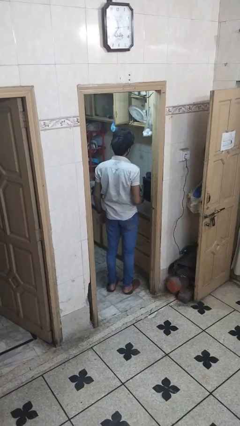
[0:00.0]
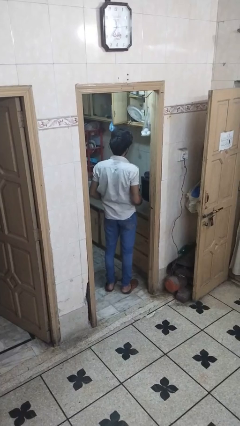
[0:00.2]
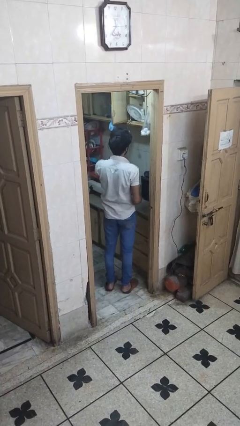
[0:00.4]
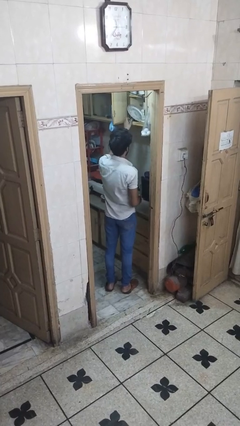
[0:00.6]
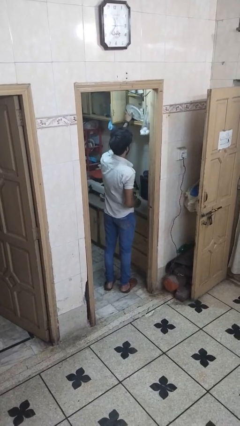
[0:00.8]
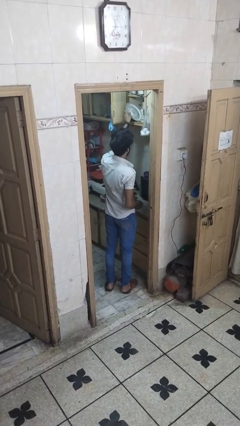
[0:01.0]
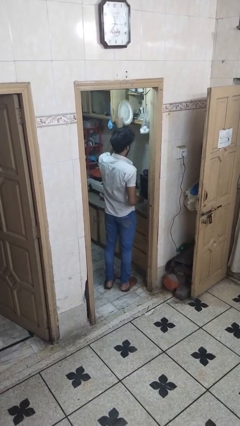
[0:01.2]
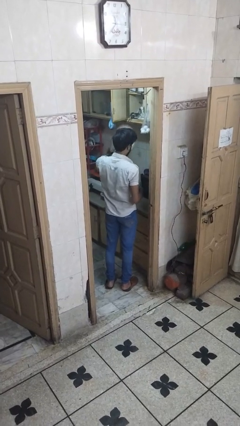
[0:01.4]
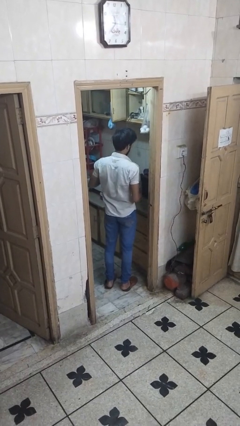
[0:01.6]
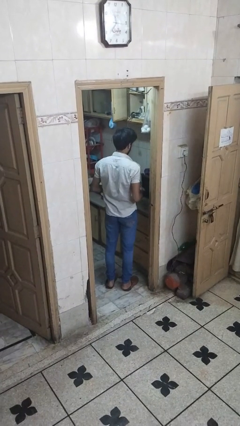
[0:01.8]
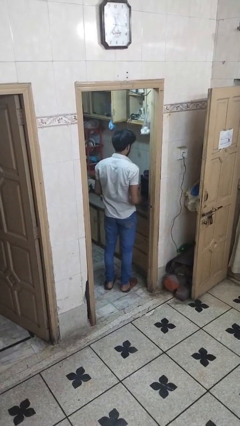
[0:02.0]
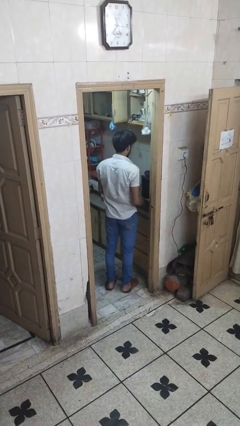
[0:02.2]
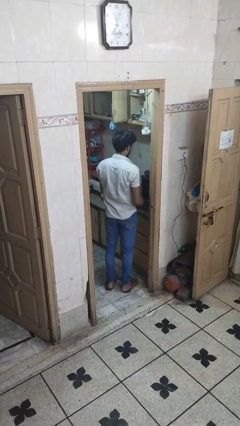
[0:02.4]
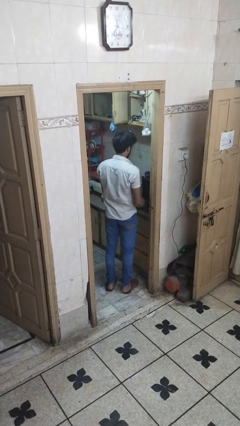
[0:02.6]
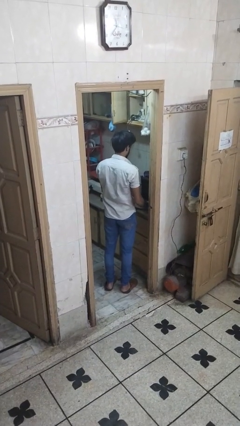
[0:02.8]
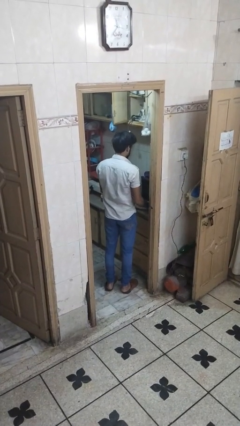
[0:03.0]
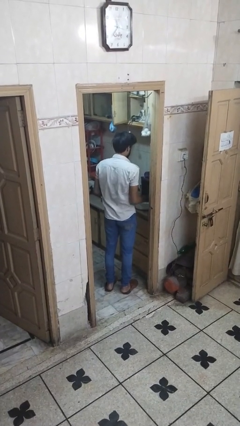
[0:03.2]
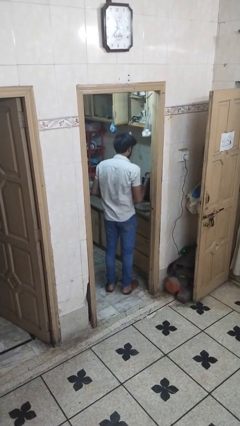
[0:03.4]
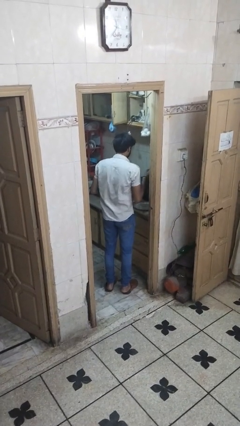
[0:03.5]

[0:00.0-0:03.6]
person takes object from cabinet

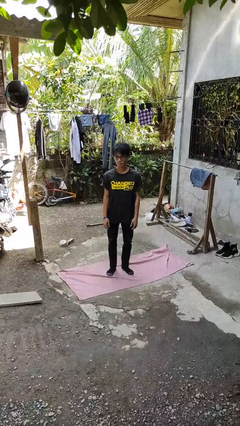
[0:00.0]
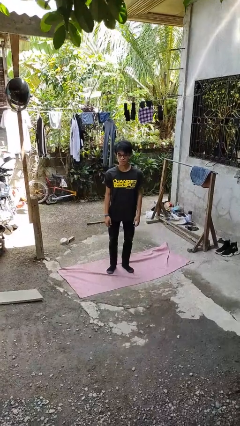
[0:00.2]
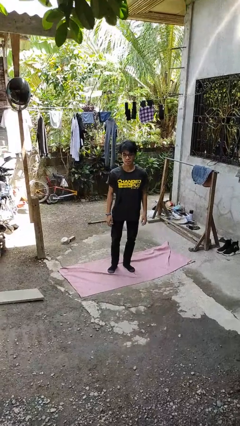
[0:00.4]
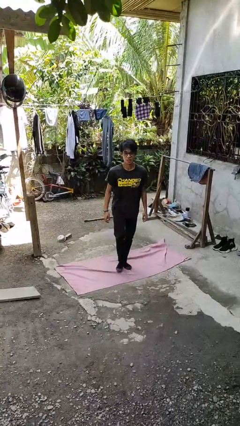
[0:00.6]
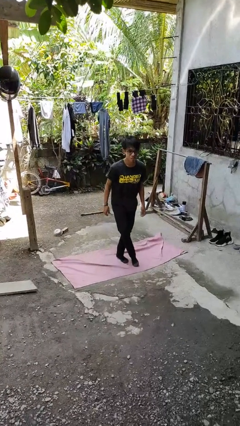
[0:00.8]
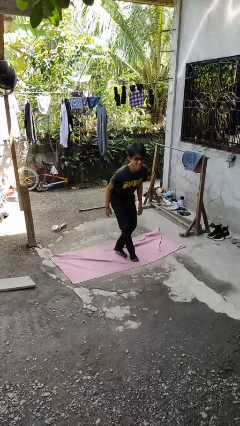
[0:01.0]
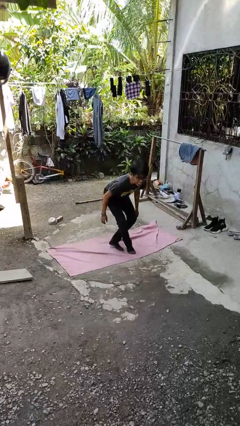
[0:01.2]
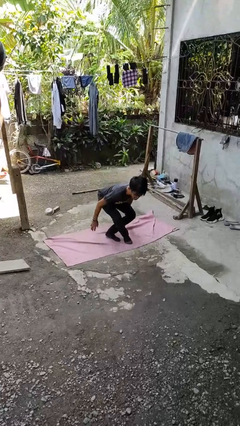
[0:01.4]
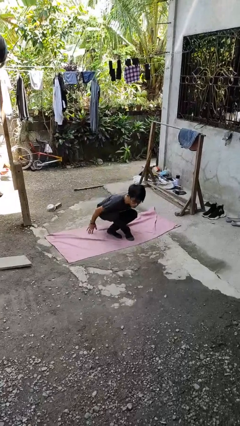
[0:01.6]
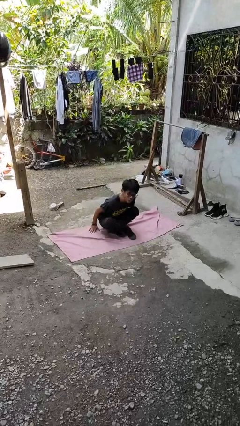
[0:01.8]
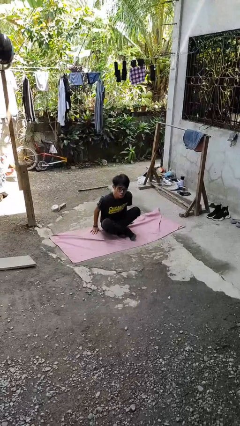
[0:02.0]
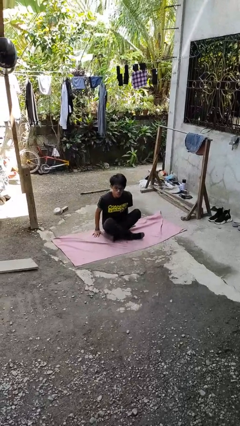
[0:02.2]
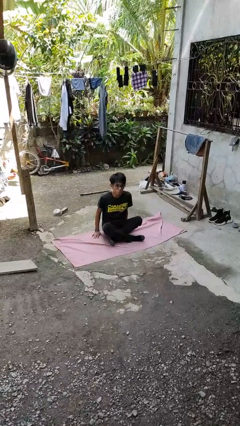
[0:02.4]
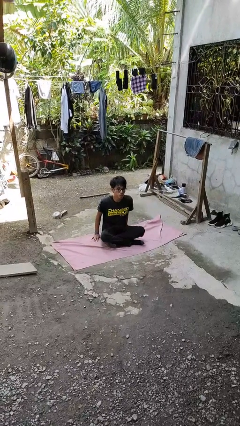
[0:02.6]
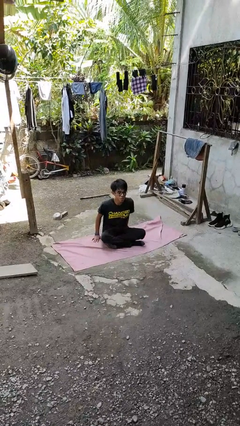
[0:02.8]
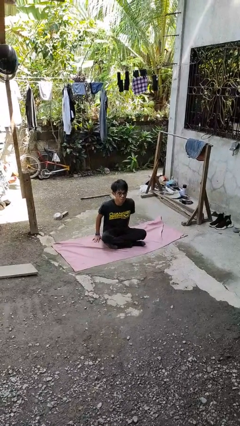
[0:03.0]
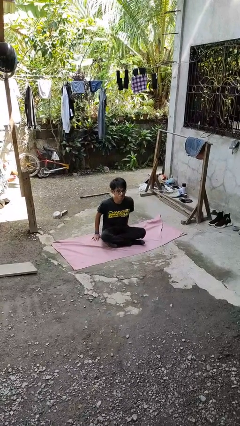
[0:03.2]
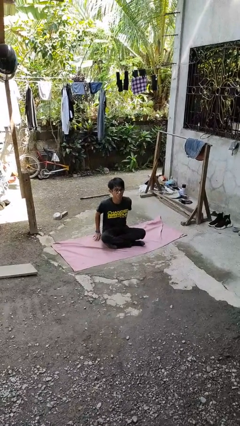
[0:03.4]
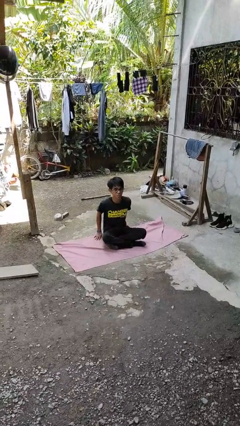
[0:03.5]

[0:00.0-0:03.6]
person sits crisscross

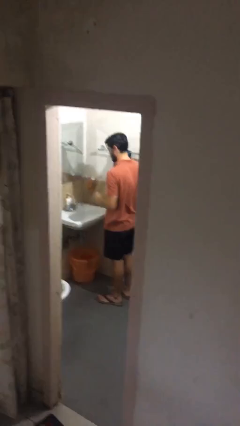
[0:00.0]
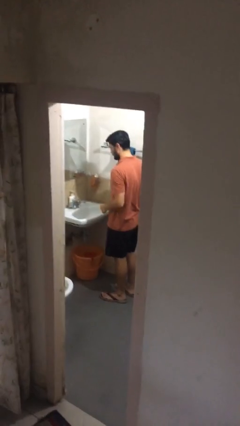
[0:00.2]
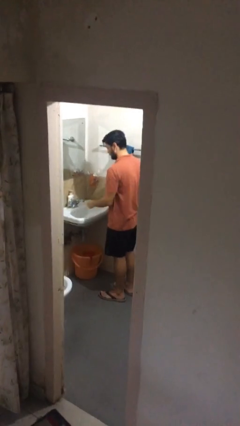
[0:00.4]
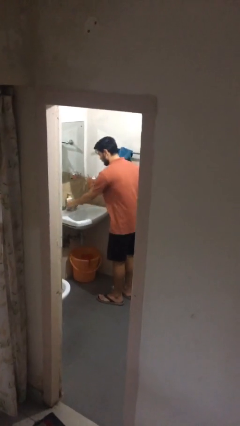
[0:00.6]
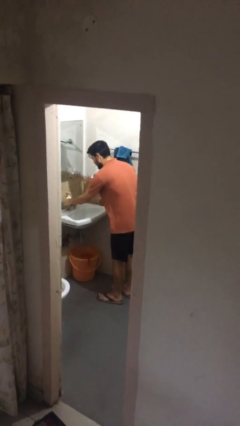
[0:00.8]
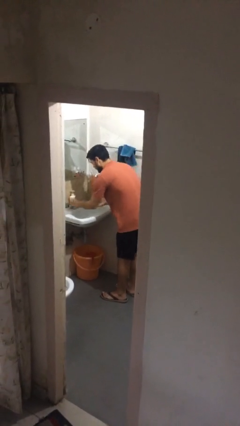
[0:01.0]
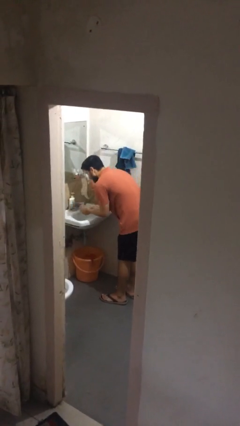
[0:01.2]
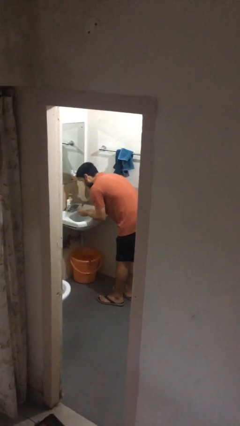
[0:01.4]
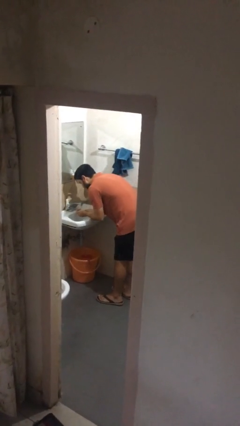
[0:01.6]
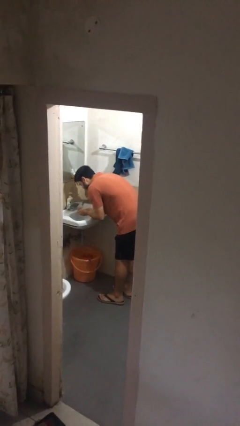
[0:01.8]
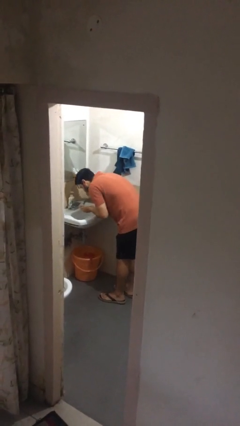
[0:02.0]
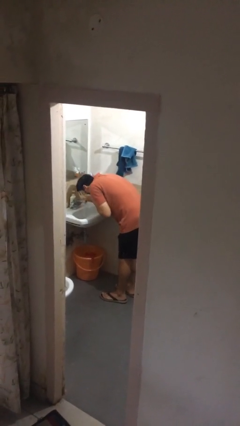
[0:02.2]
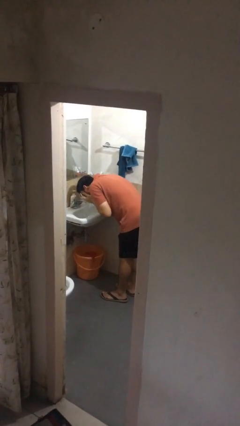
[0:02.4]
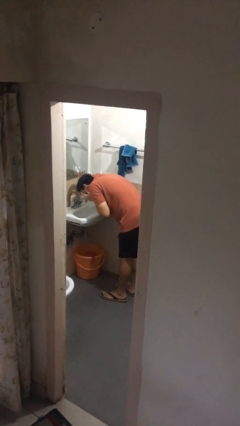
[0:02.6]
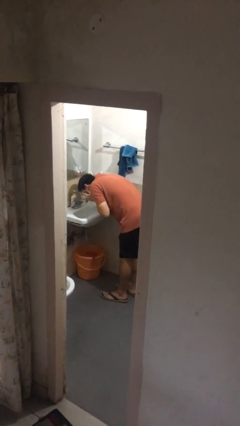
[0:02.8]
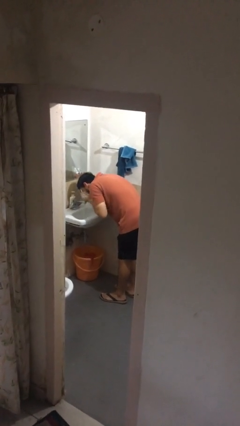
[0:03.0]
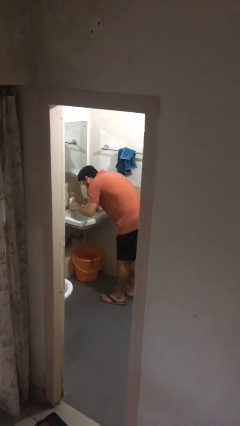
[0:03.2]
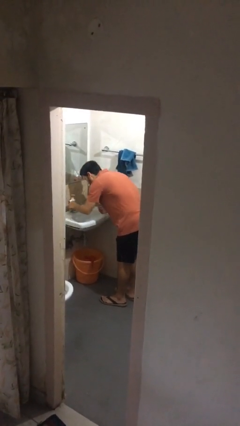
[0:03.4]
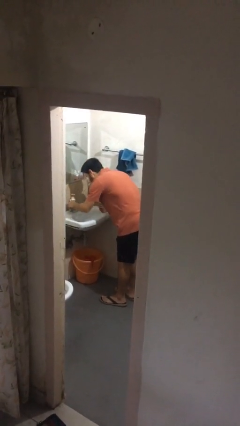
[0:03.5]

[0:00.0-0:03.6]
person washes face

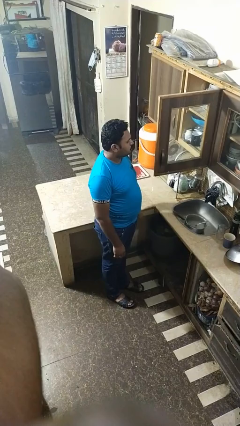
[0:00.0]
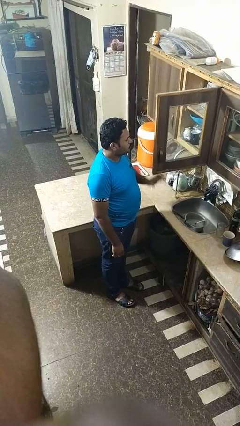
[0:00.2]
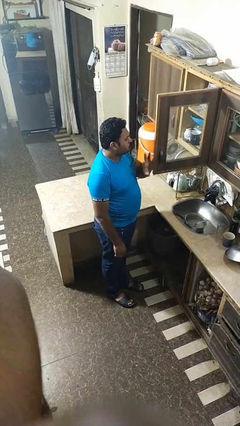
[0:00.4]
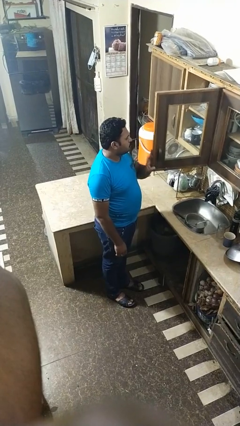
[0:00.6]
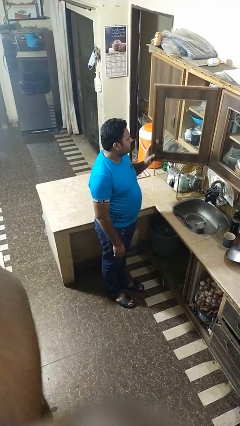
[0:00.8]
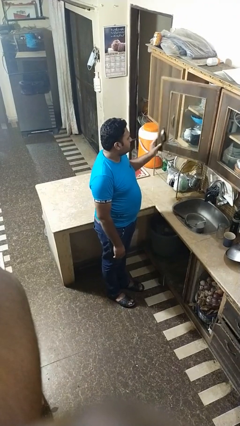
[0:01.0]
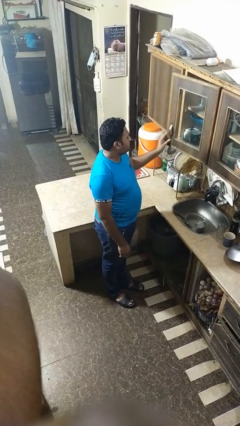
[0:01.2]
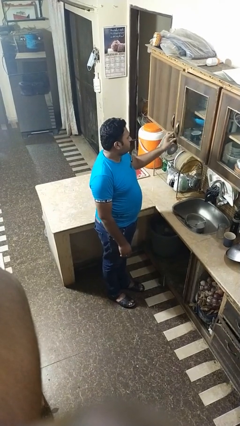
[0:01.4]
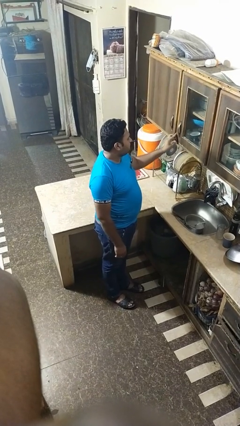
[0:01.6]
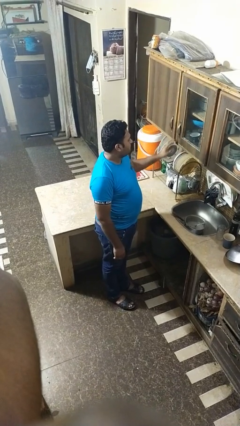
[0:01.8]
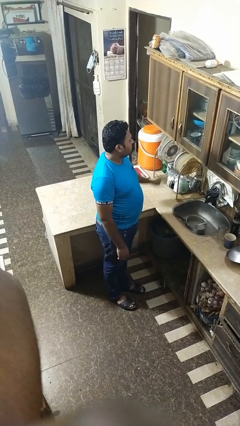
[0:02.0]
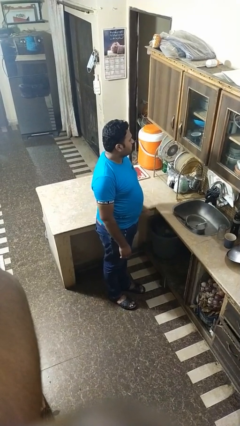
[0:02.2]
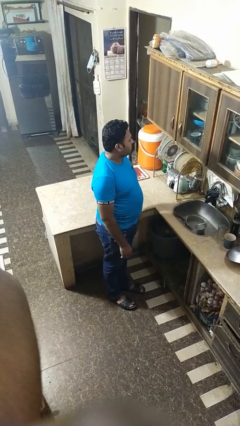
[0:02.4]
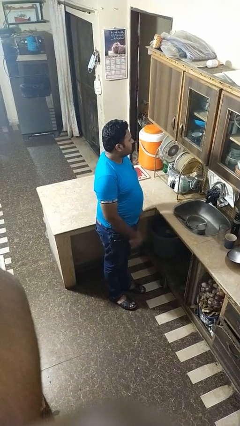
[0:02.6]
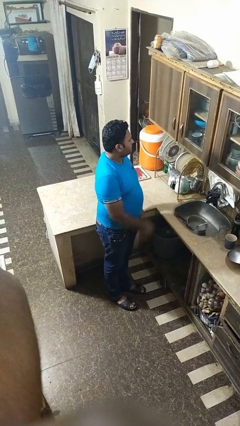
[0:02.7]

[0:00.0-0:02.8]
person closes cabinet

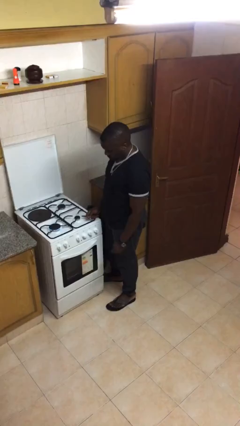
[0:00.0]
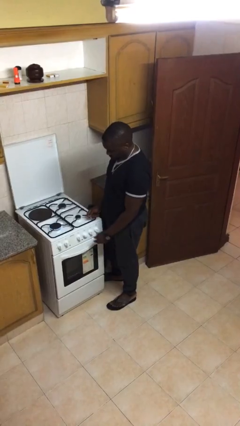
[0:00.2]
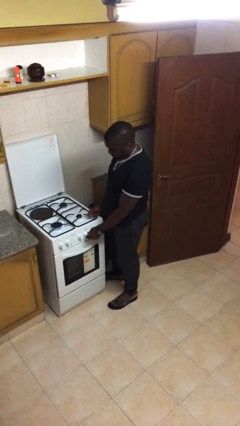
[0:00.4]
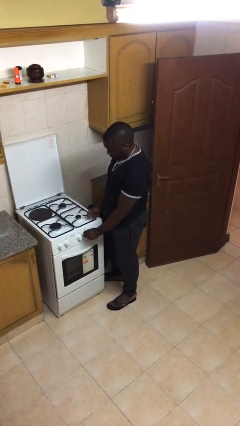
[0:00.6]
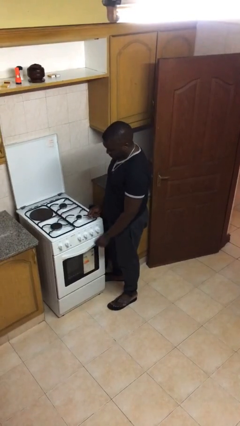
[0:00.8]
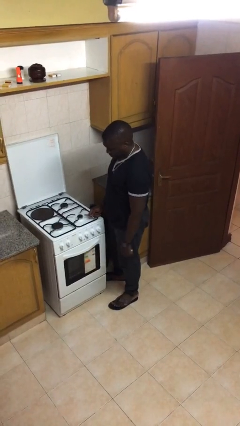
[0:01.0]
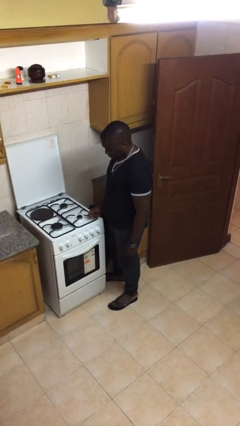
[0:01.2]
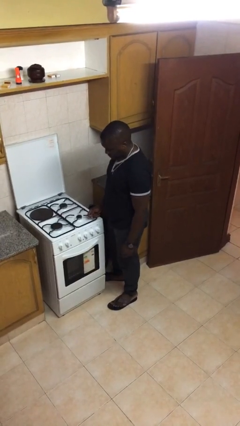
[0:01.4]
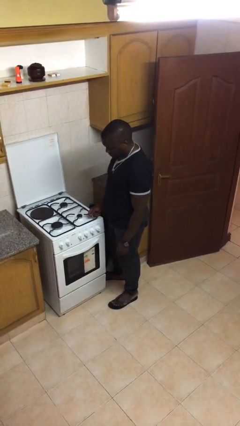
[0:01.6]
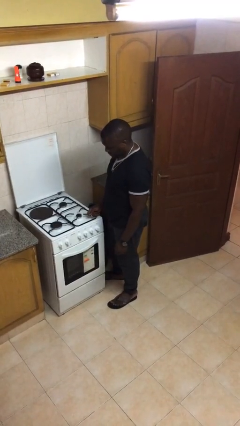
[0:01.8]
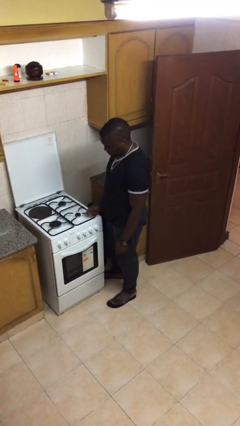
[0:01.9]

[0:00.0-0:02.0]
person turns off stovetop

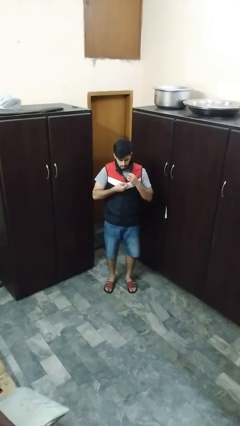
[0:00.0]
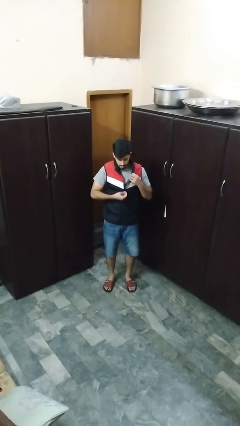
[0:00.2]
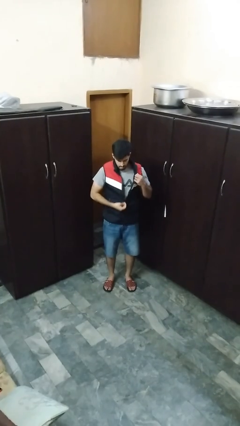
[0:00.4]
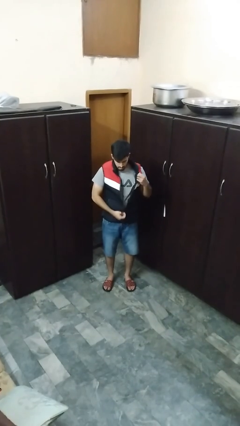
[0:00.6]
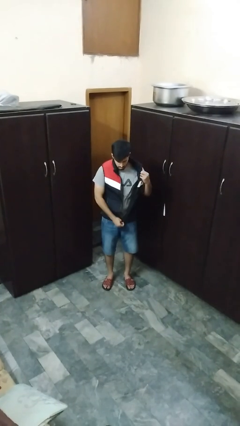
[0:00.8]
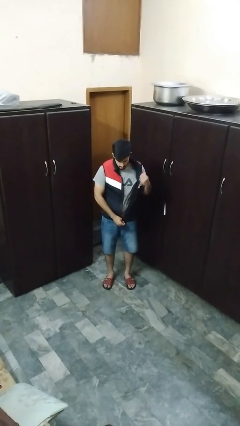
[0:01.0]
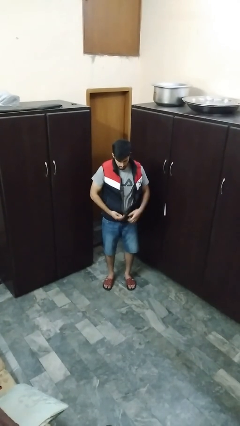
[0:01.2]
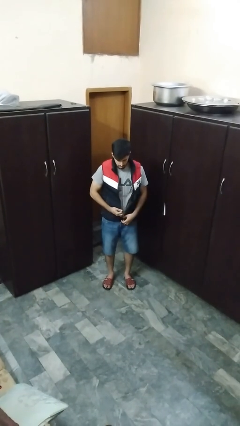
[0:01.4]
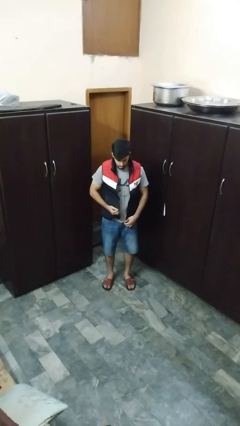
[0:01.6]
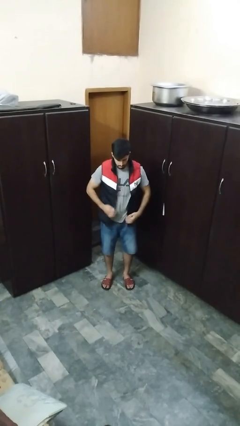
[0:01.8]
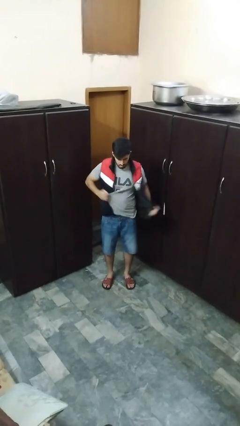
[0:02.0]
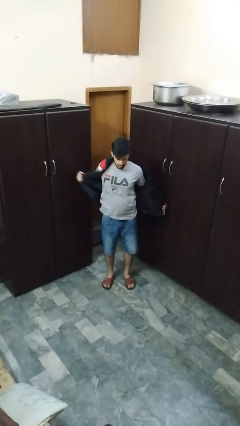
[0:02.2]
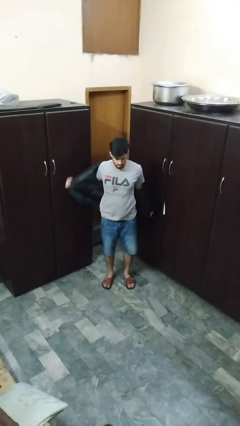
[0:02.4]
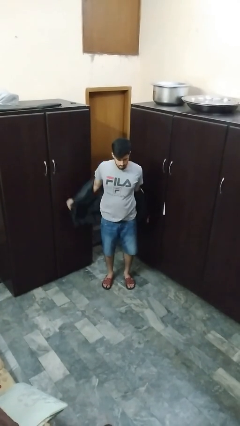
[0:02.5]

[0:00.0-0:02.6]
person unzips jacket
